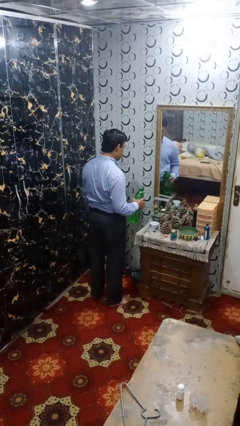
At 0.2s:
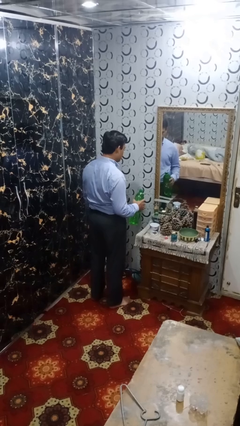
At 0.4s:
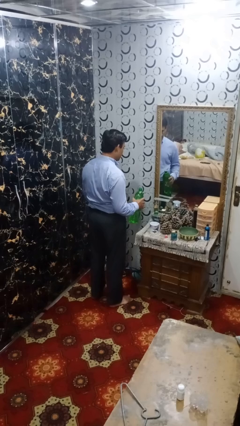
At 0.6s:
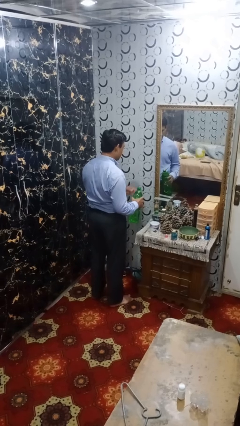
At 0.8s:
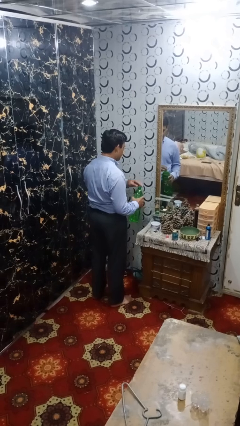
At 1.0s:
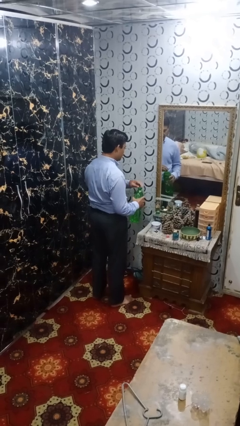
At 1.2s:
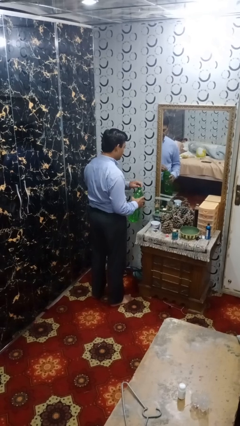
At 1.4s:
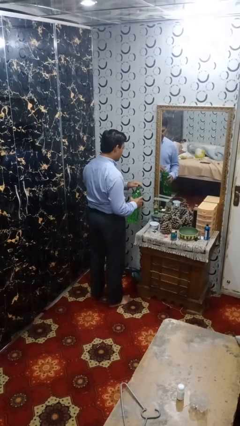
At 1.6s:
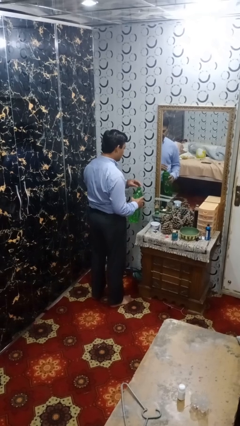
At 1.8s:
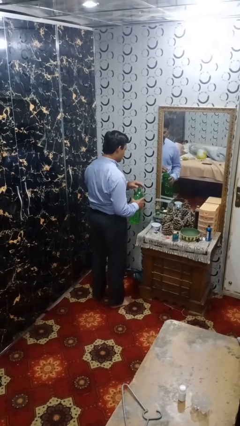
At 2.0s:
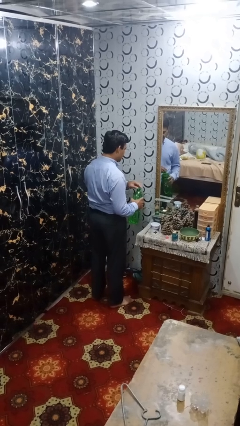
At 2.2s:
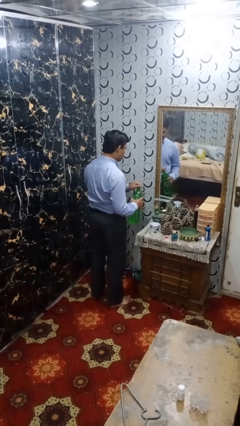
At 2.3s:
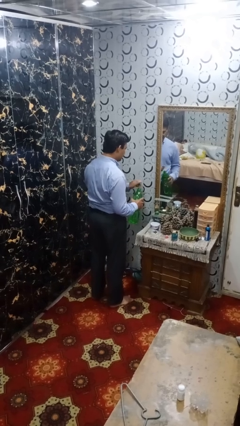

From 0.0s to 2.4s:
person unscrews lid from bottle

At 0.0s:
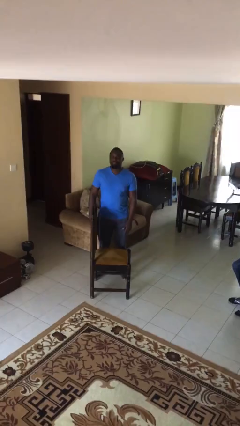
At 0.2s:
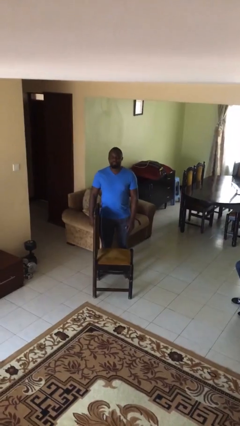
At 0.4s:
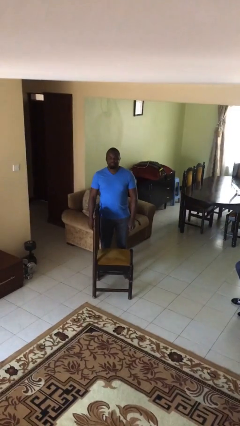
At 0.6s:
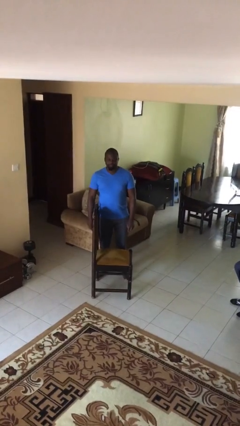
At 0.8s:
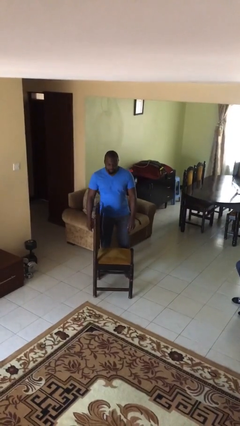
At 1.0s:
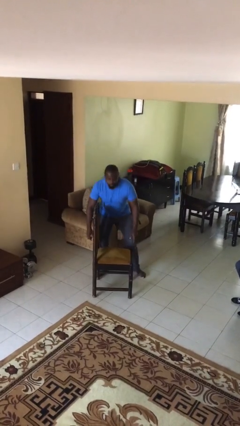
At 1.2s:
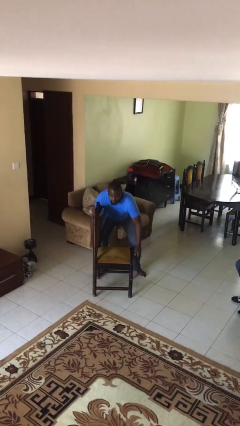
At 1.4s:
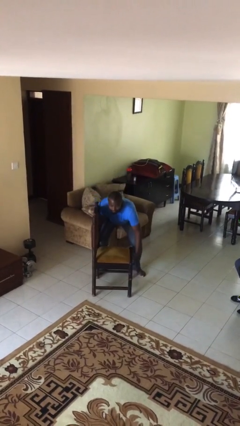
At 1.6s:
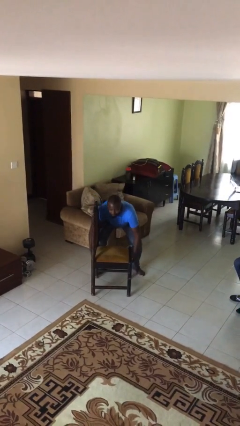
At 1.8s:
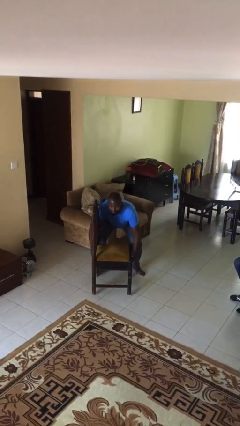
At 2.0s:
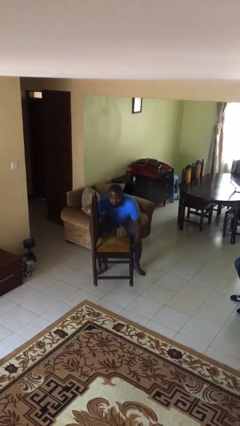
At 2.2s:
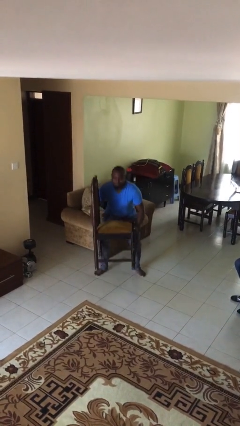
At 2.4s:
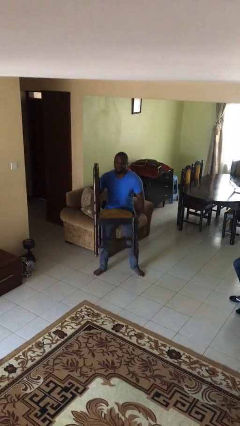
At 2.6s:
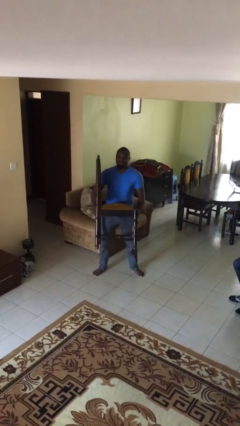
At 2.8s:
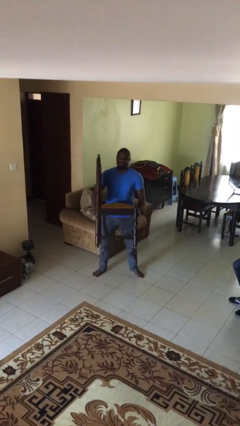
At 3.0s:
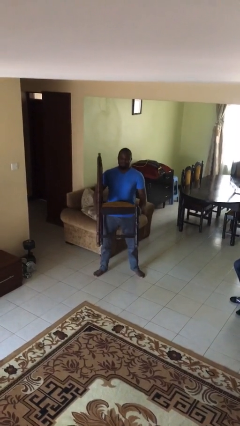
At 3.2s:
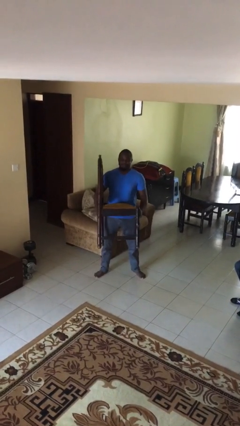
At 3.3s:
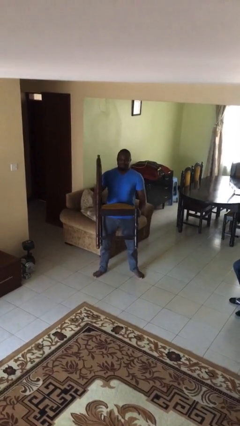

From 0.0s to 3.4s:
person picks up object from floor

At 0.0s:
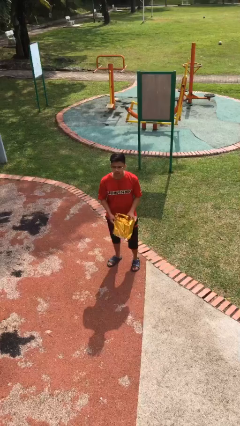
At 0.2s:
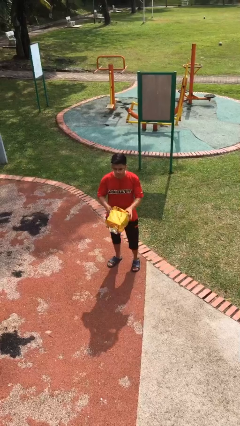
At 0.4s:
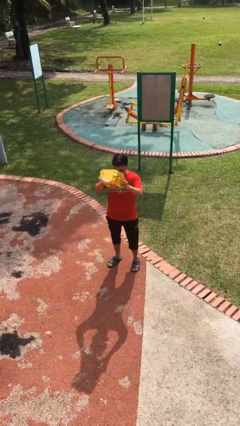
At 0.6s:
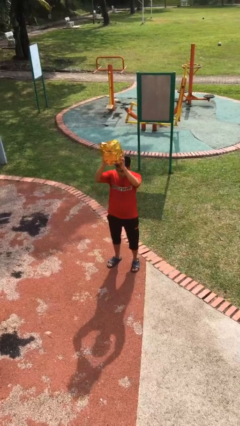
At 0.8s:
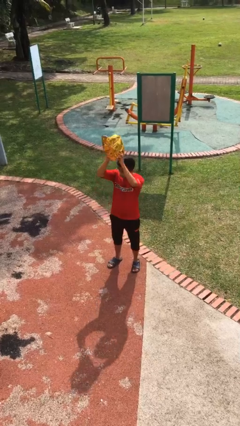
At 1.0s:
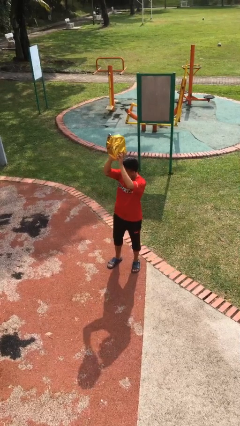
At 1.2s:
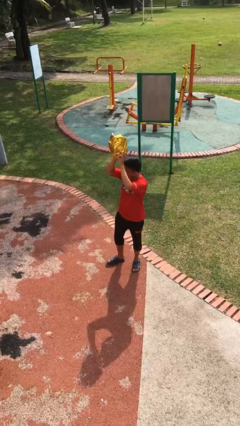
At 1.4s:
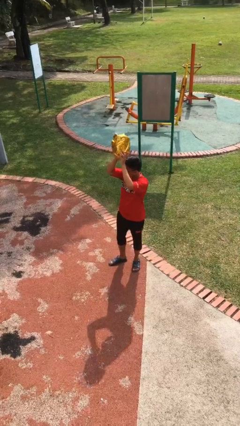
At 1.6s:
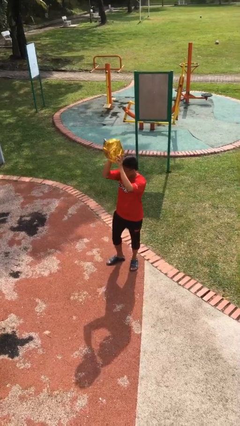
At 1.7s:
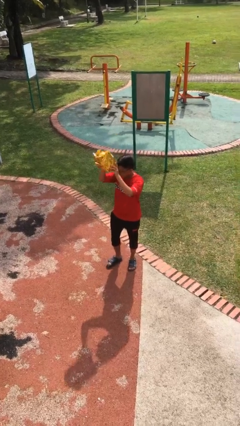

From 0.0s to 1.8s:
person holds object above head

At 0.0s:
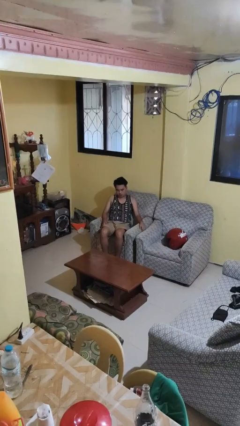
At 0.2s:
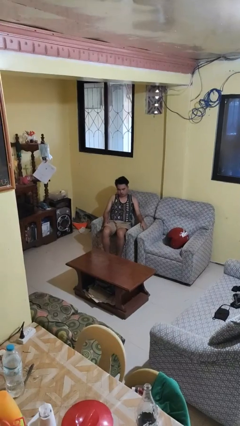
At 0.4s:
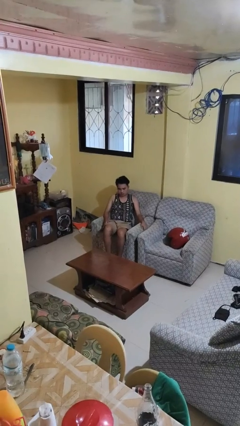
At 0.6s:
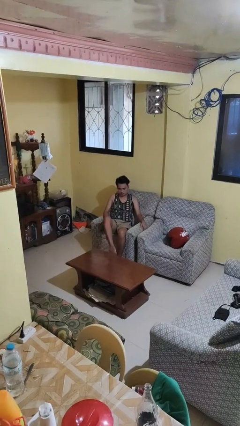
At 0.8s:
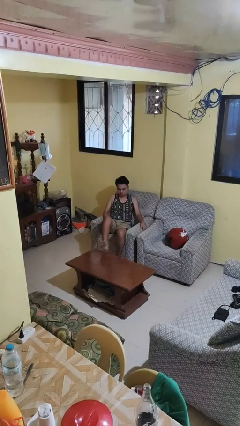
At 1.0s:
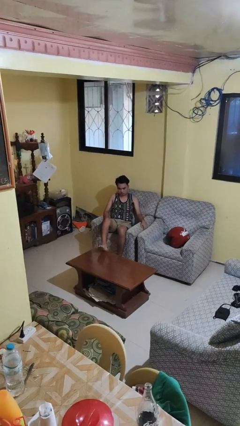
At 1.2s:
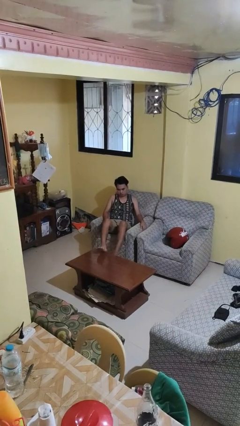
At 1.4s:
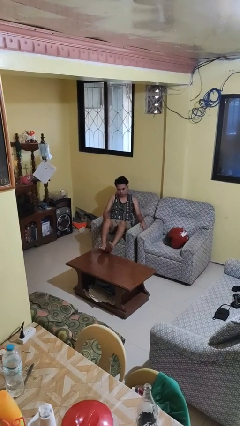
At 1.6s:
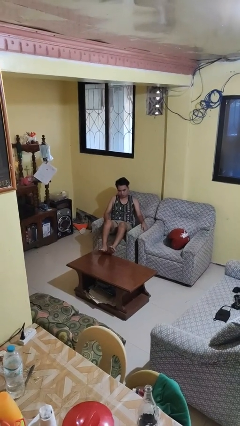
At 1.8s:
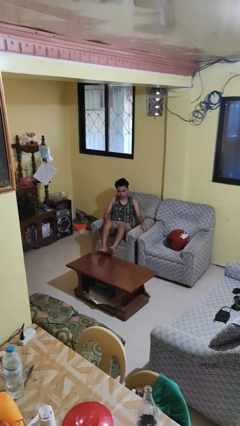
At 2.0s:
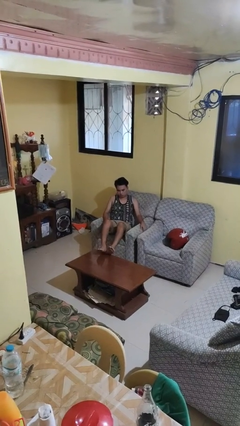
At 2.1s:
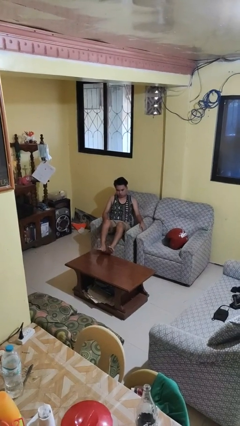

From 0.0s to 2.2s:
person puts feet up

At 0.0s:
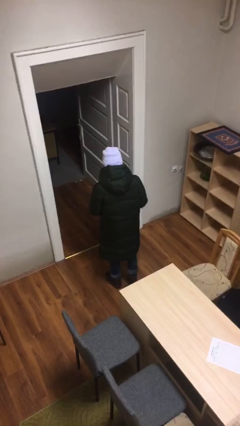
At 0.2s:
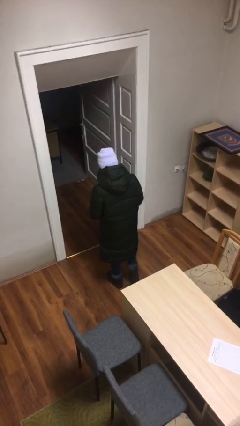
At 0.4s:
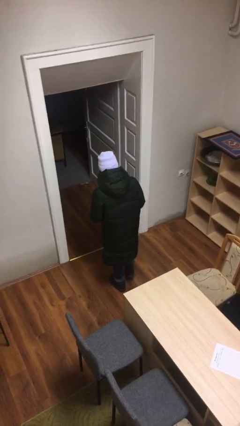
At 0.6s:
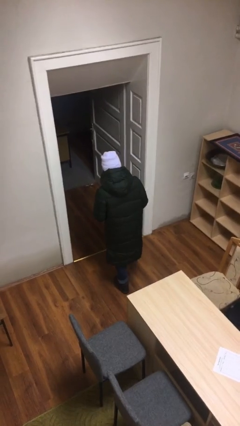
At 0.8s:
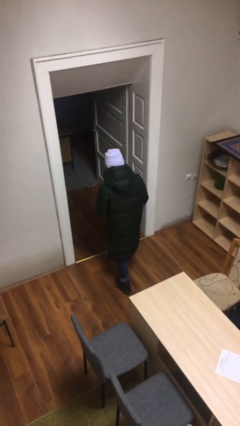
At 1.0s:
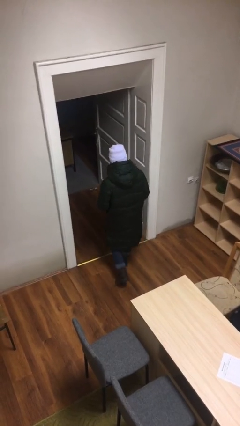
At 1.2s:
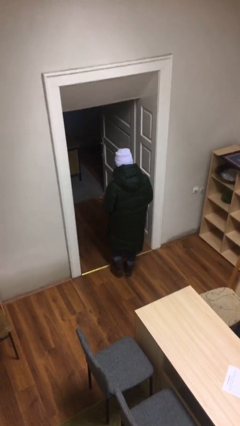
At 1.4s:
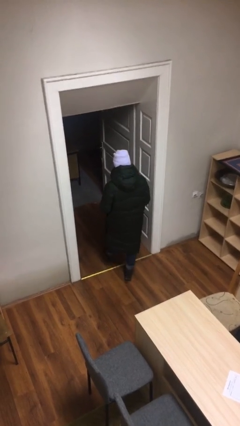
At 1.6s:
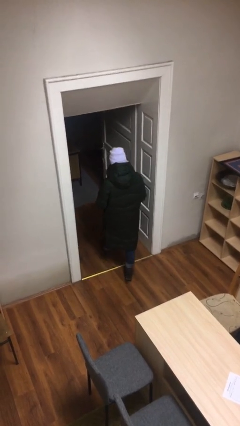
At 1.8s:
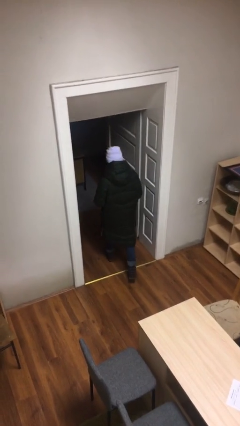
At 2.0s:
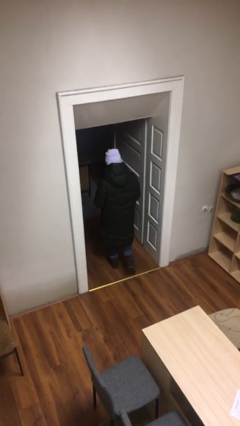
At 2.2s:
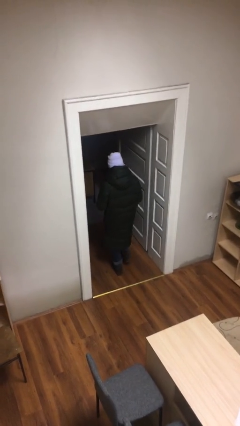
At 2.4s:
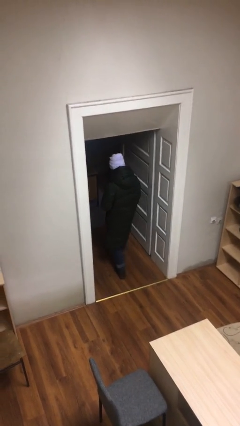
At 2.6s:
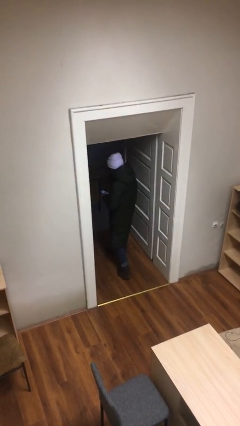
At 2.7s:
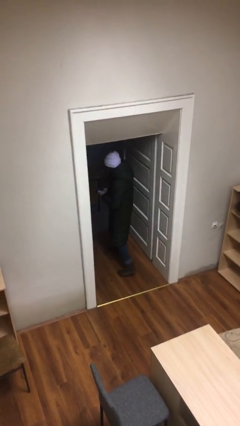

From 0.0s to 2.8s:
person exits scene through structure

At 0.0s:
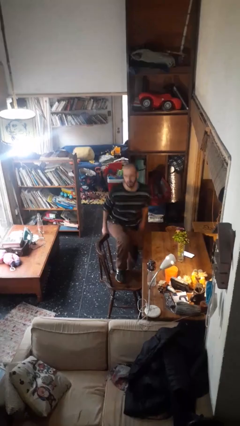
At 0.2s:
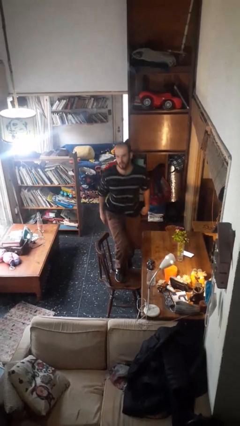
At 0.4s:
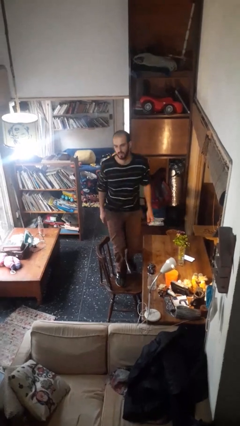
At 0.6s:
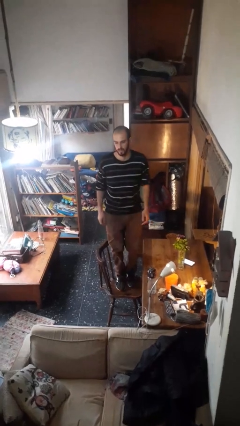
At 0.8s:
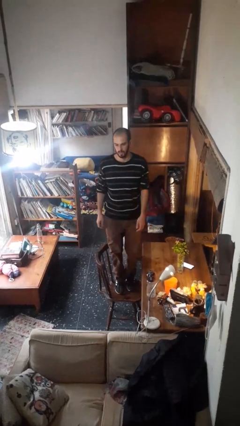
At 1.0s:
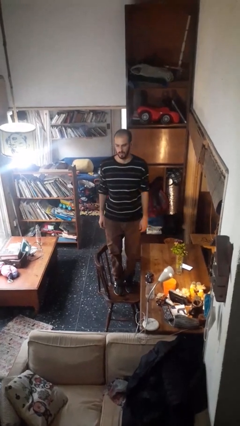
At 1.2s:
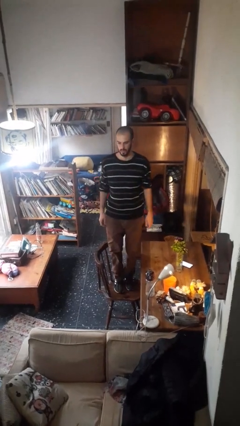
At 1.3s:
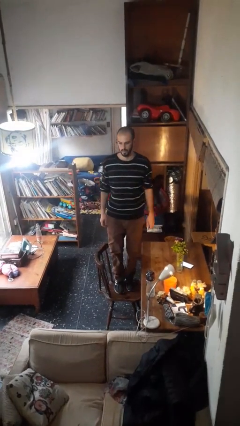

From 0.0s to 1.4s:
person climbs on chair

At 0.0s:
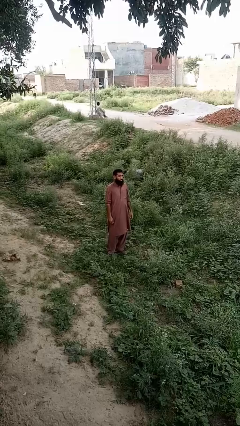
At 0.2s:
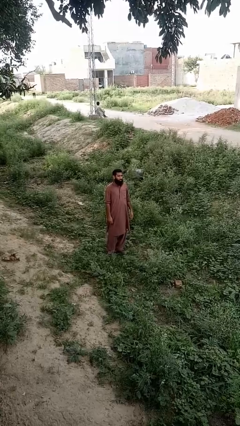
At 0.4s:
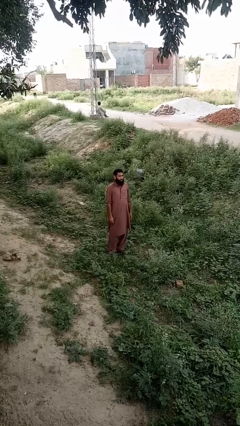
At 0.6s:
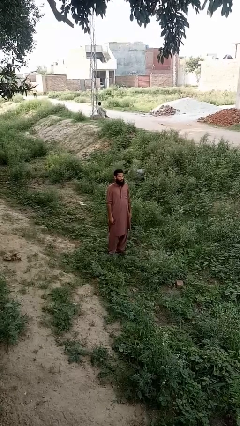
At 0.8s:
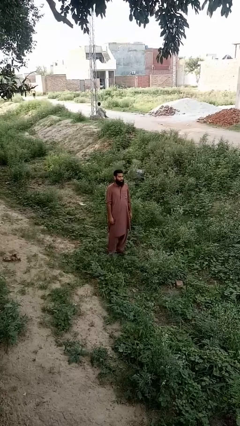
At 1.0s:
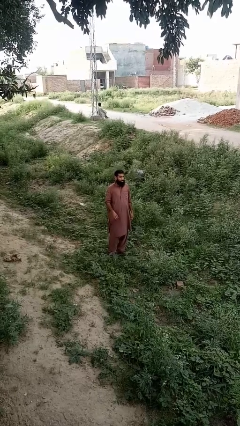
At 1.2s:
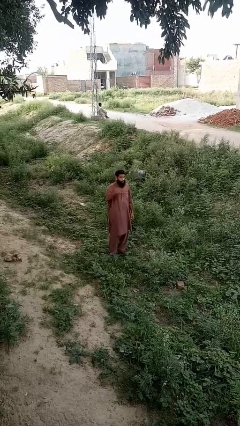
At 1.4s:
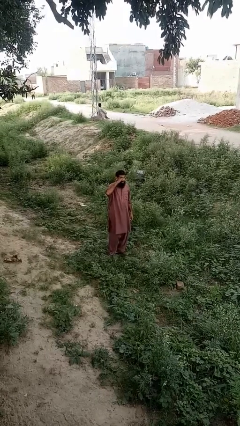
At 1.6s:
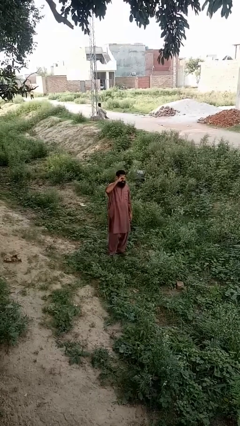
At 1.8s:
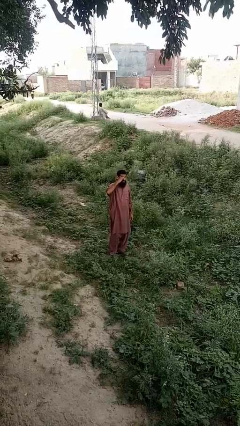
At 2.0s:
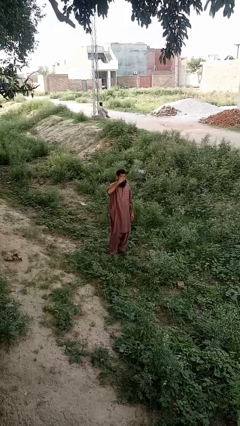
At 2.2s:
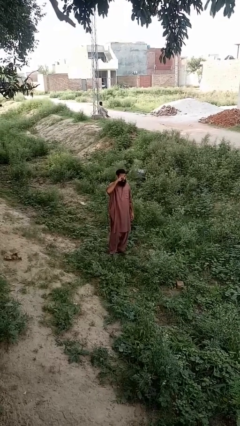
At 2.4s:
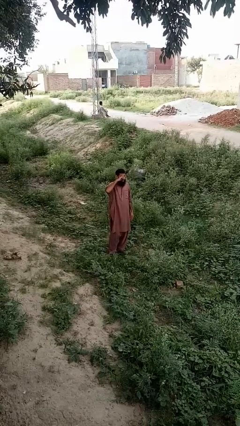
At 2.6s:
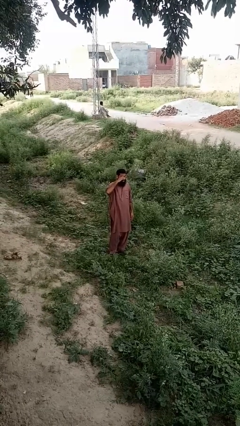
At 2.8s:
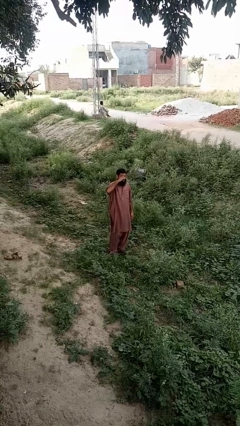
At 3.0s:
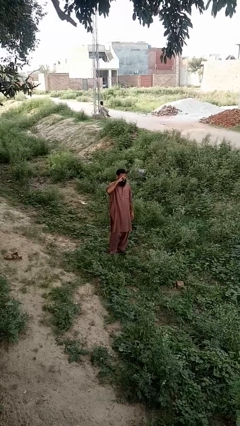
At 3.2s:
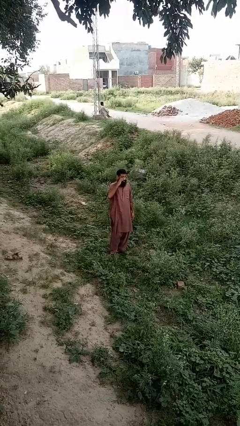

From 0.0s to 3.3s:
person rubs eyes
